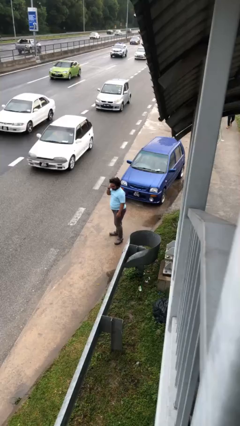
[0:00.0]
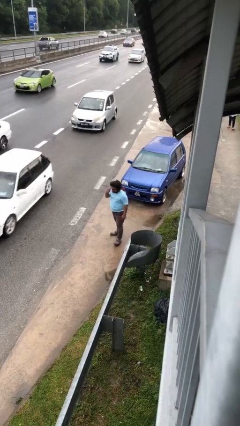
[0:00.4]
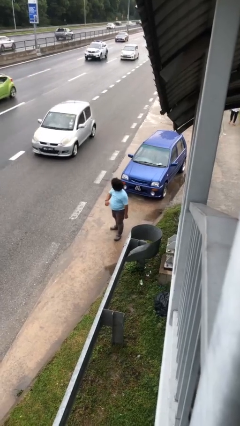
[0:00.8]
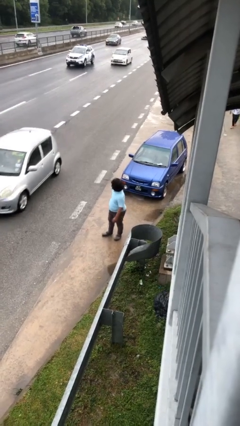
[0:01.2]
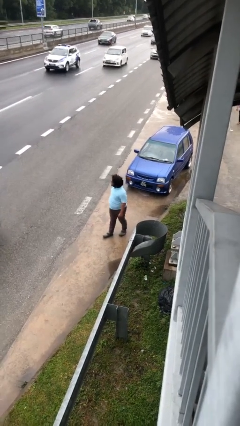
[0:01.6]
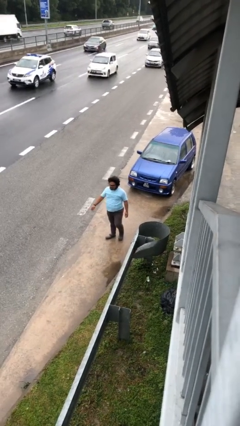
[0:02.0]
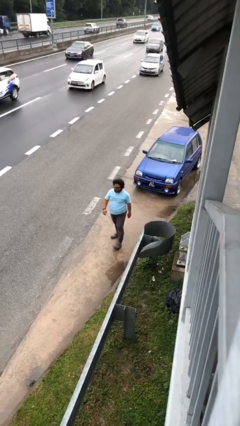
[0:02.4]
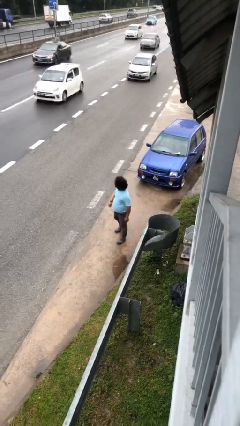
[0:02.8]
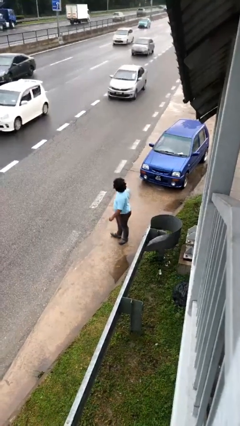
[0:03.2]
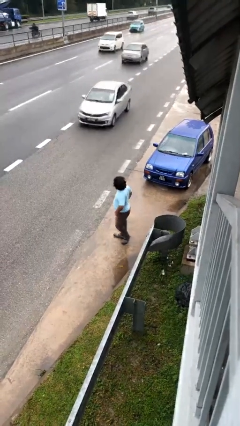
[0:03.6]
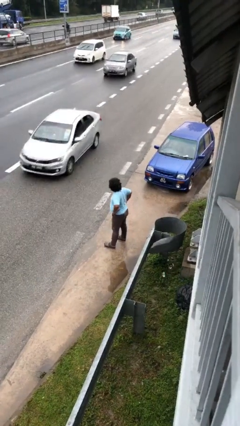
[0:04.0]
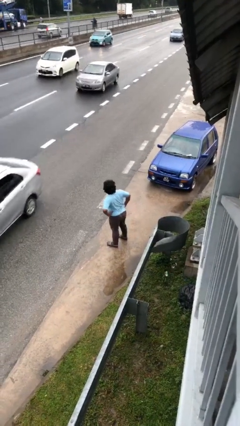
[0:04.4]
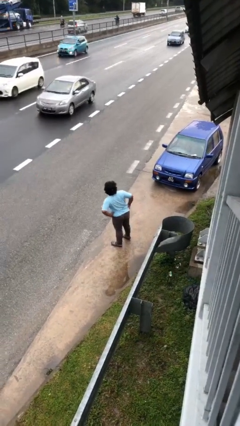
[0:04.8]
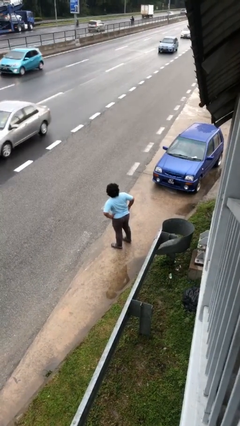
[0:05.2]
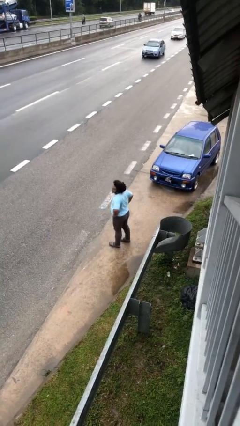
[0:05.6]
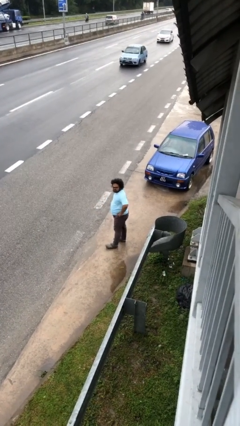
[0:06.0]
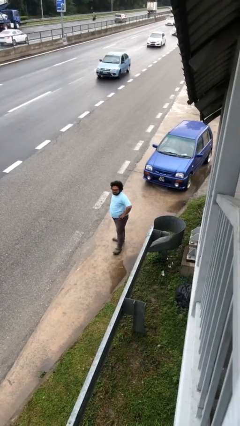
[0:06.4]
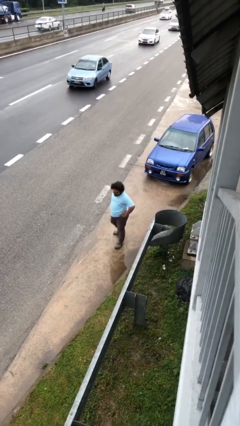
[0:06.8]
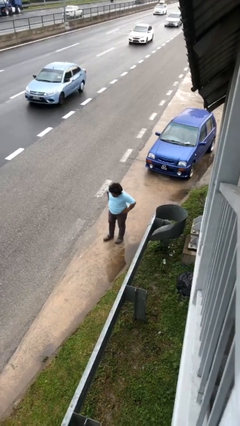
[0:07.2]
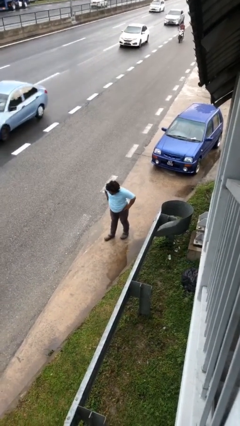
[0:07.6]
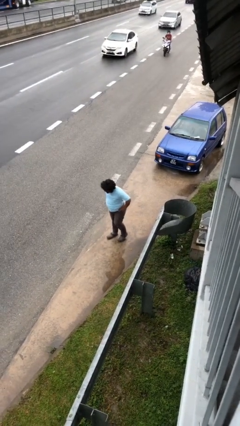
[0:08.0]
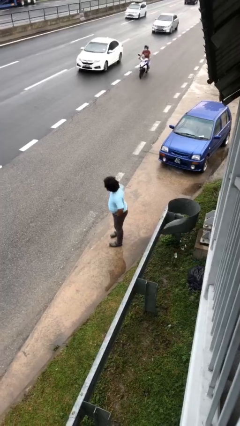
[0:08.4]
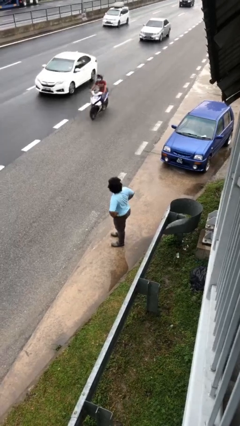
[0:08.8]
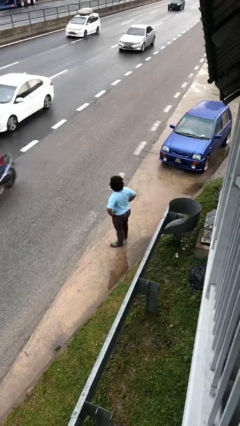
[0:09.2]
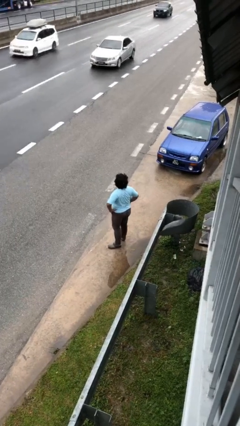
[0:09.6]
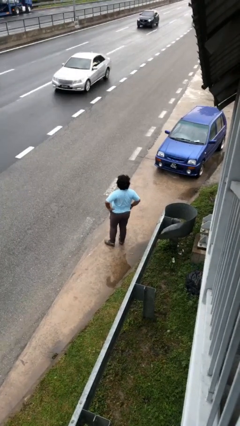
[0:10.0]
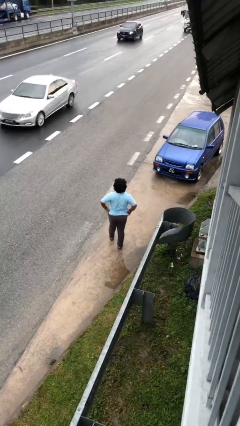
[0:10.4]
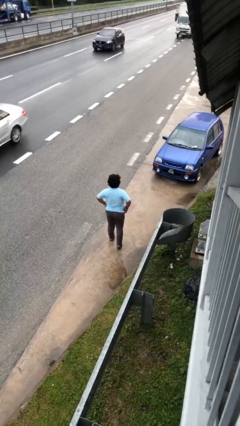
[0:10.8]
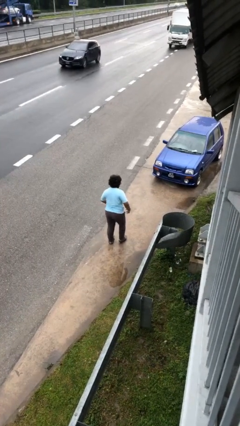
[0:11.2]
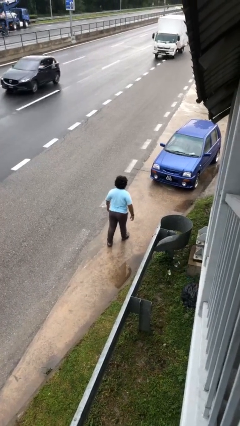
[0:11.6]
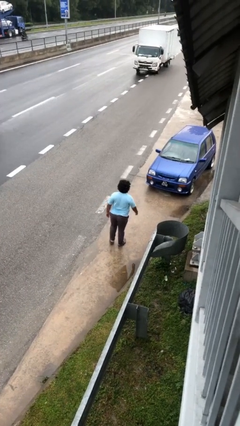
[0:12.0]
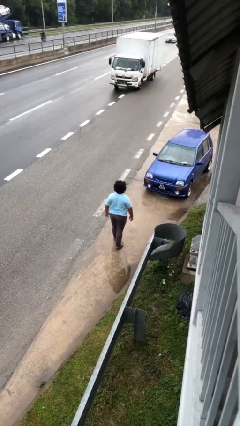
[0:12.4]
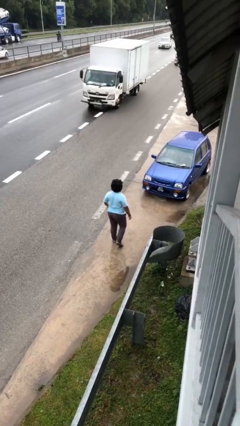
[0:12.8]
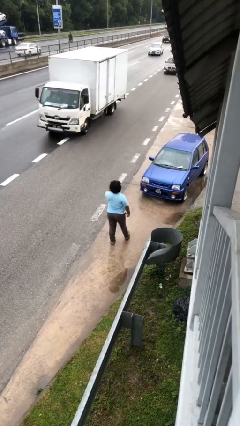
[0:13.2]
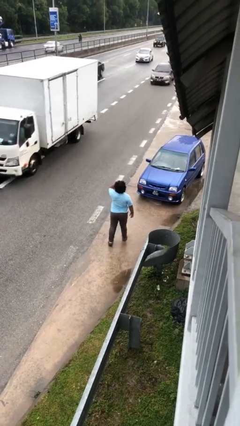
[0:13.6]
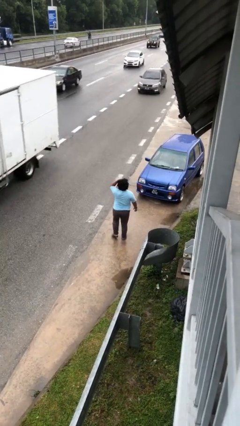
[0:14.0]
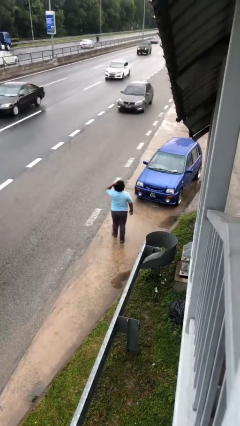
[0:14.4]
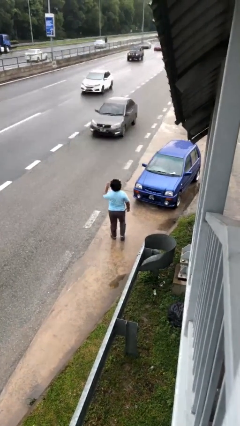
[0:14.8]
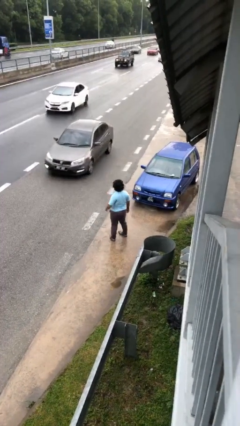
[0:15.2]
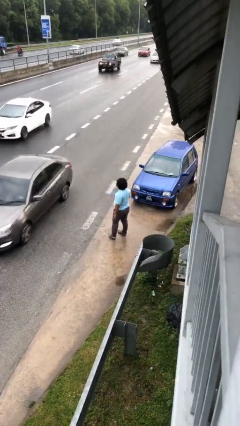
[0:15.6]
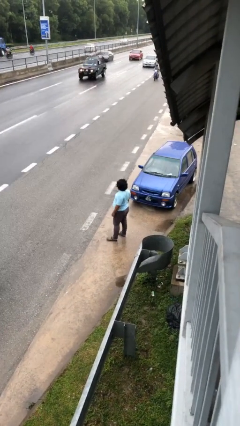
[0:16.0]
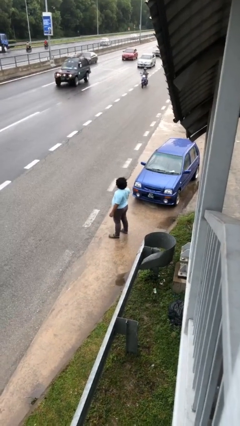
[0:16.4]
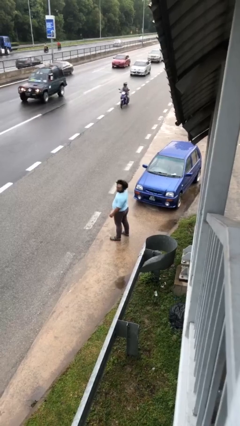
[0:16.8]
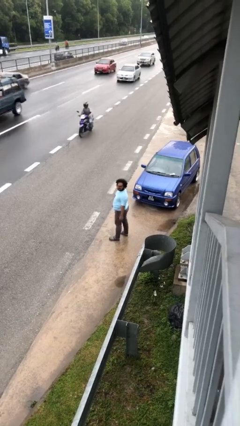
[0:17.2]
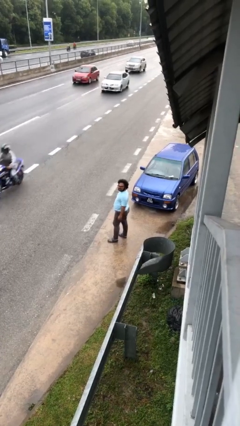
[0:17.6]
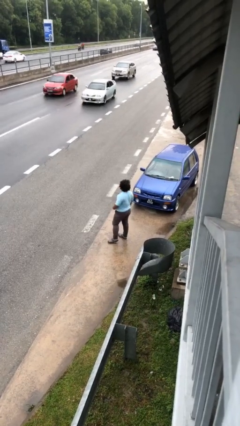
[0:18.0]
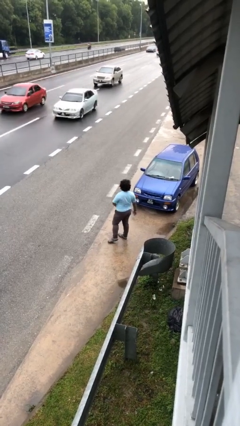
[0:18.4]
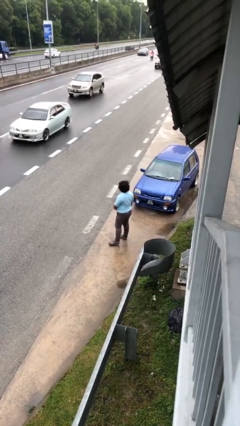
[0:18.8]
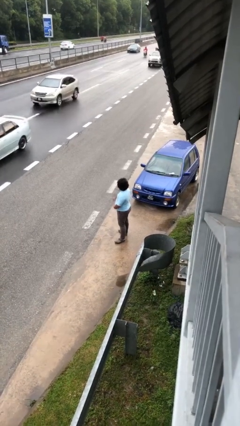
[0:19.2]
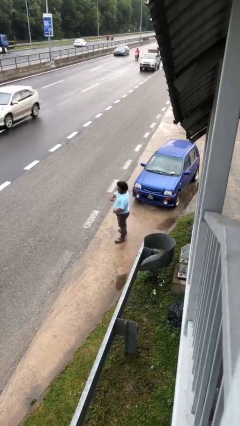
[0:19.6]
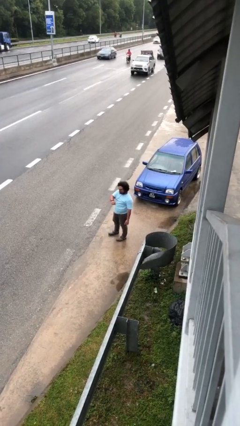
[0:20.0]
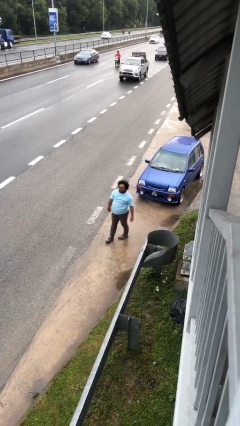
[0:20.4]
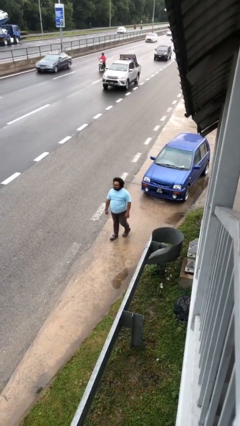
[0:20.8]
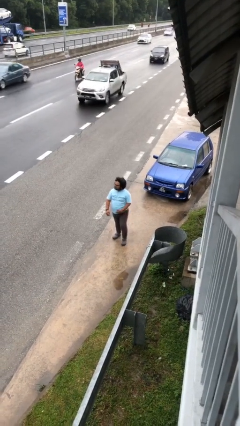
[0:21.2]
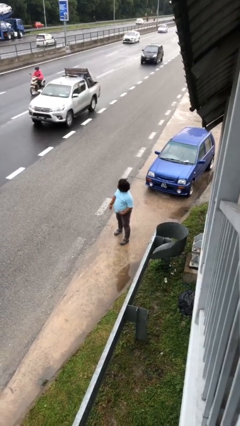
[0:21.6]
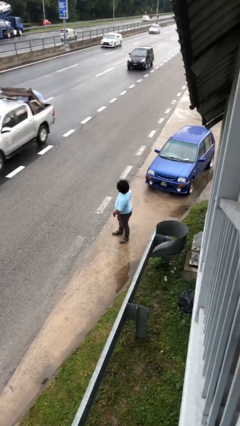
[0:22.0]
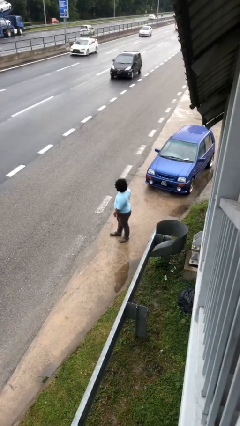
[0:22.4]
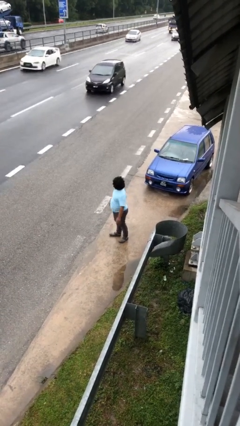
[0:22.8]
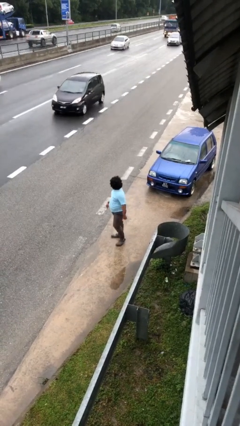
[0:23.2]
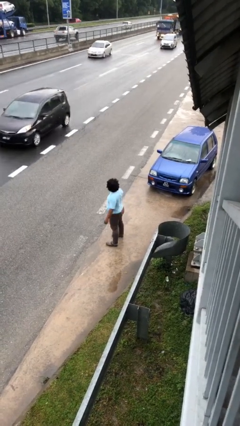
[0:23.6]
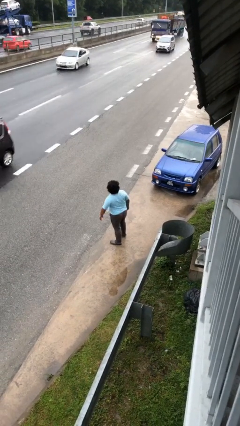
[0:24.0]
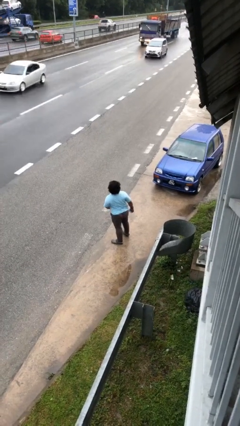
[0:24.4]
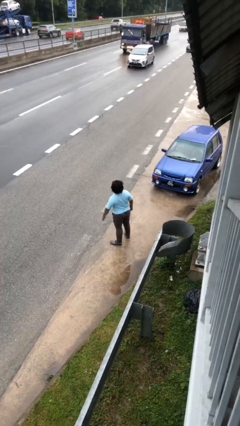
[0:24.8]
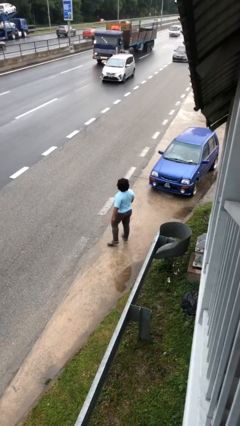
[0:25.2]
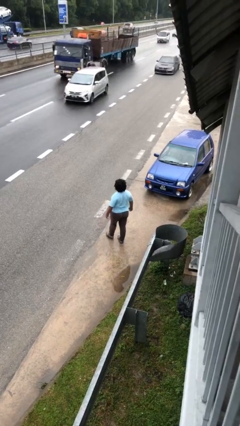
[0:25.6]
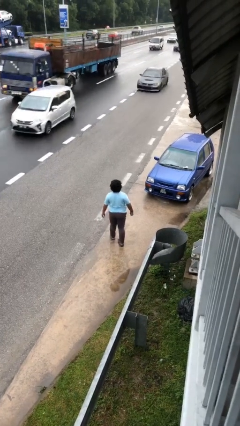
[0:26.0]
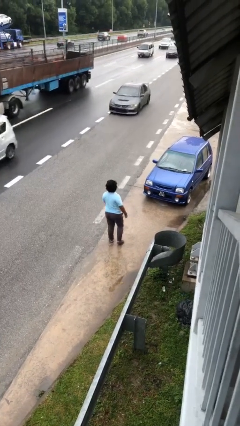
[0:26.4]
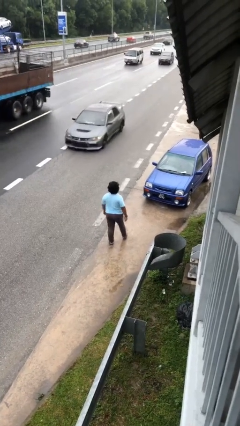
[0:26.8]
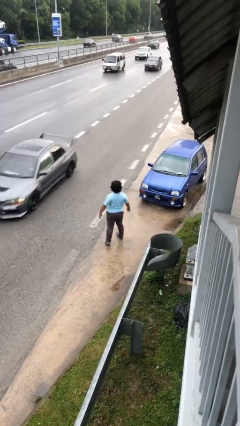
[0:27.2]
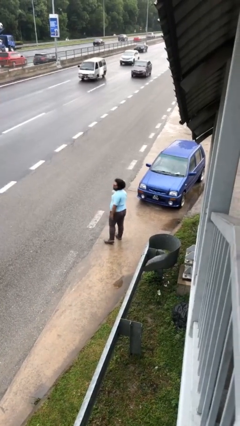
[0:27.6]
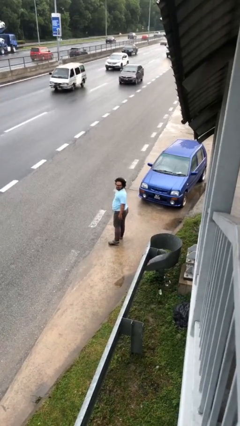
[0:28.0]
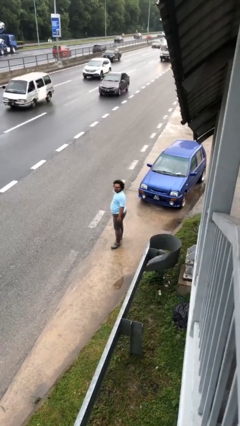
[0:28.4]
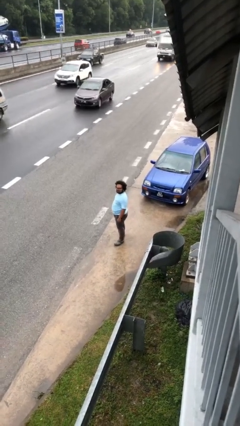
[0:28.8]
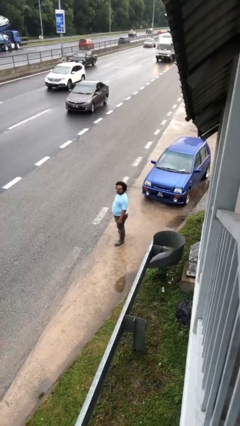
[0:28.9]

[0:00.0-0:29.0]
person walks

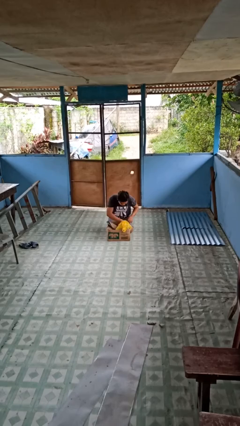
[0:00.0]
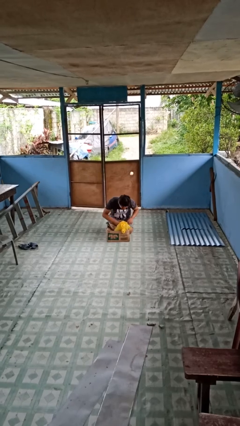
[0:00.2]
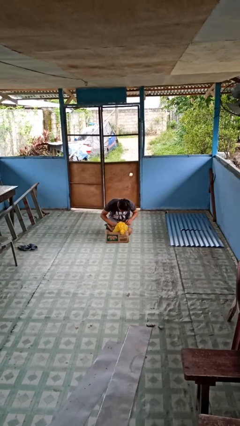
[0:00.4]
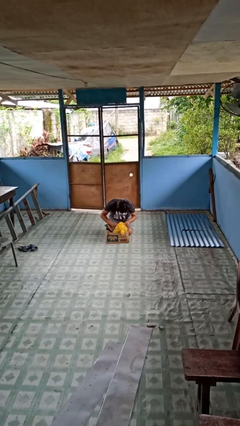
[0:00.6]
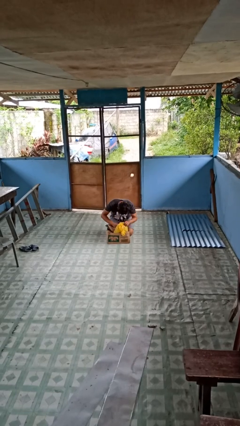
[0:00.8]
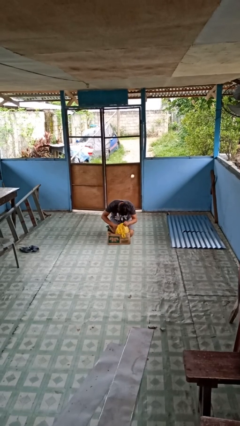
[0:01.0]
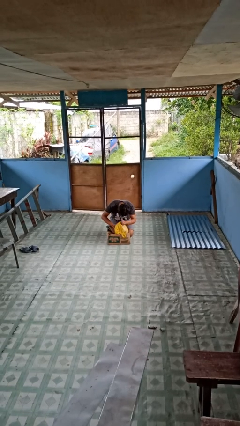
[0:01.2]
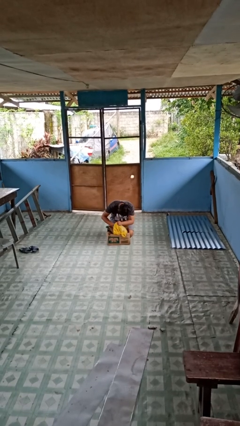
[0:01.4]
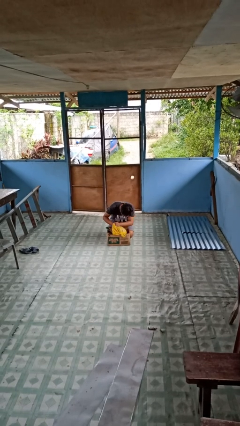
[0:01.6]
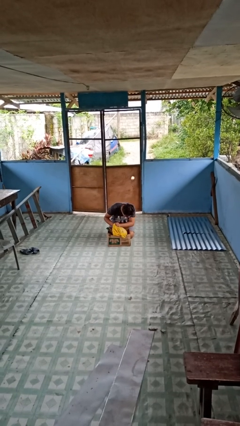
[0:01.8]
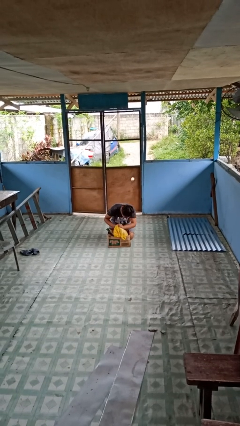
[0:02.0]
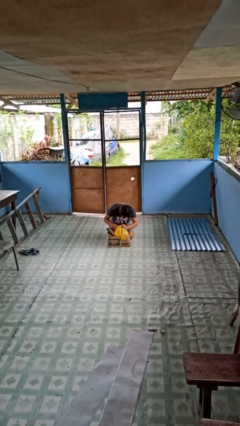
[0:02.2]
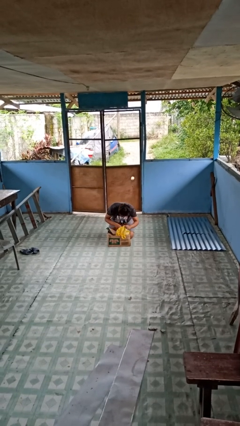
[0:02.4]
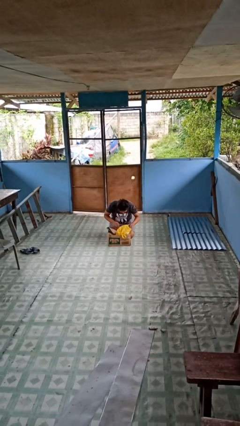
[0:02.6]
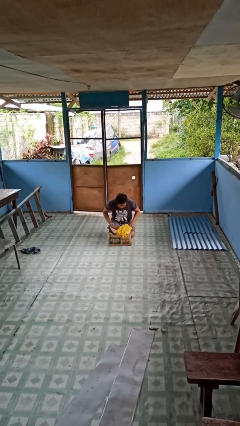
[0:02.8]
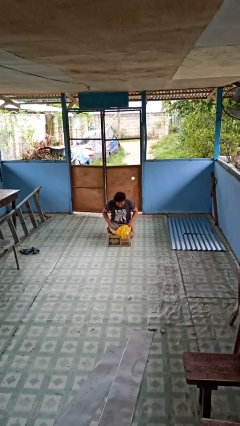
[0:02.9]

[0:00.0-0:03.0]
person searches in box

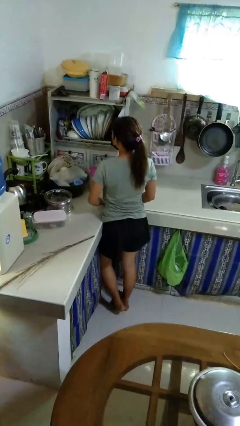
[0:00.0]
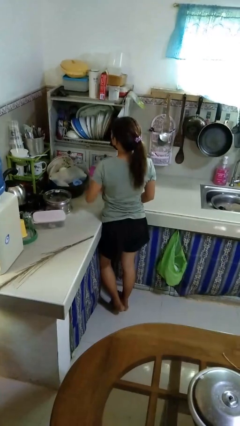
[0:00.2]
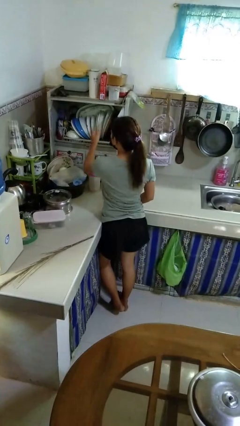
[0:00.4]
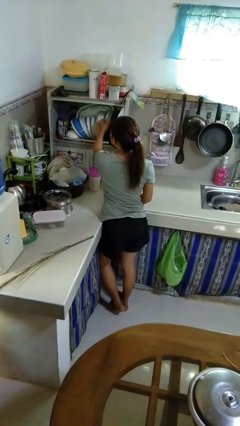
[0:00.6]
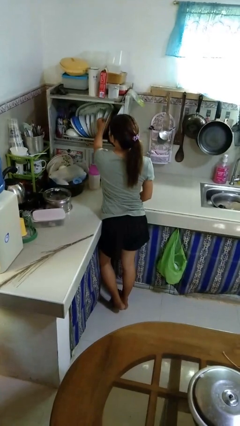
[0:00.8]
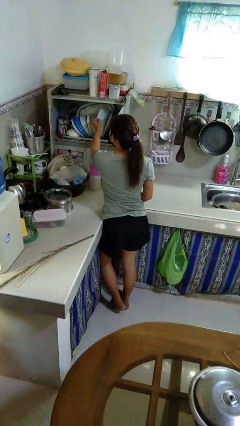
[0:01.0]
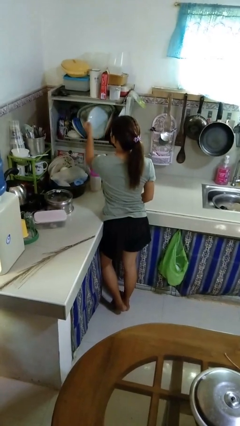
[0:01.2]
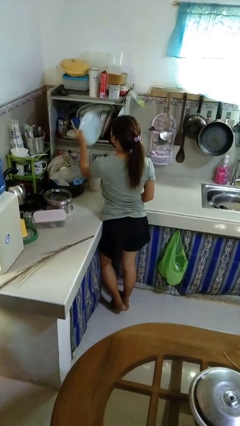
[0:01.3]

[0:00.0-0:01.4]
person takes object from kitchen drawer
